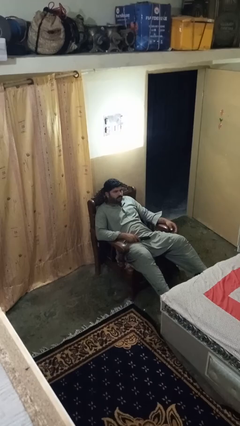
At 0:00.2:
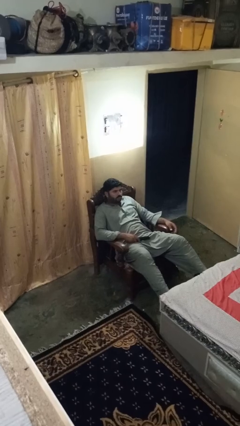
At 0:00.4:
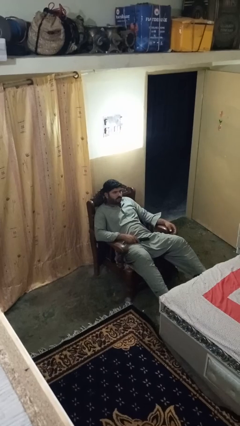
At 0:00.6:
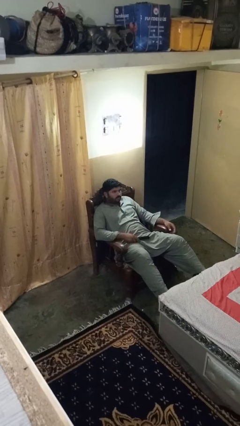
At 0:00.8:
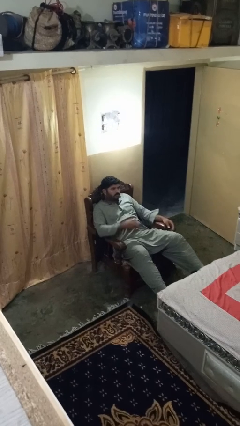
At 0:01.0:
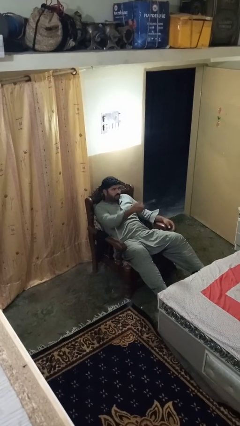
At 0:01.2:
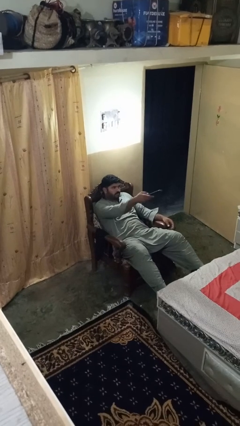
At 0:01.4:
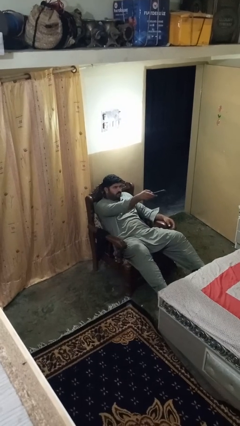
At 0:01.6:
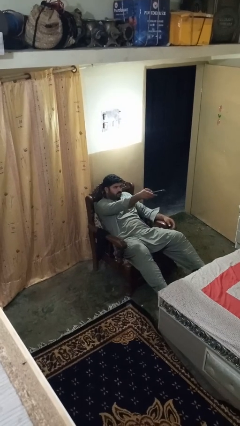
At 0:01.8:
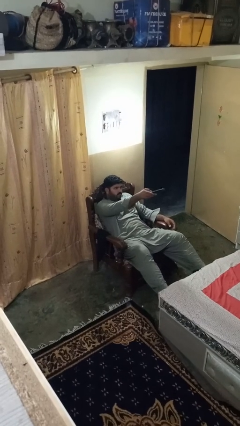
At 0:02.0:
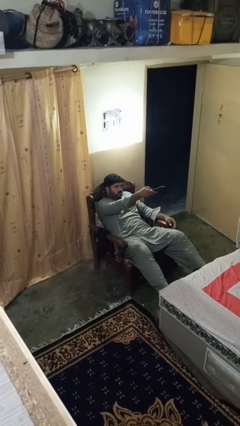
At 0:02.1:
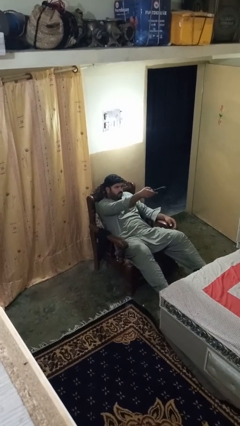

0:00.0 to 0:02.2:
person uses television remote

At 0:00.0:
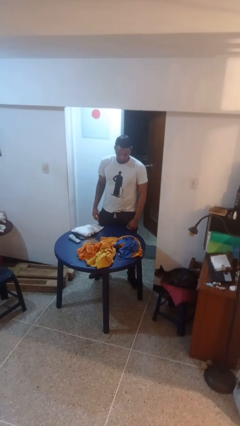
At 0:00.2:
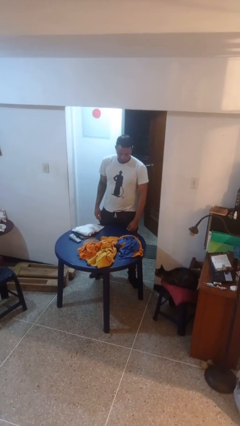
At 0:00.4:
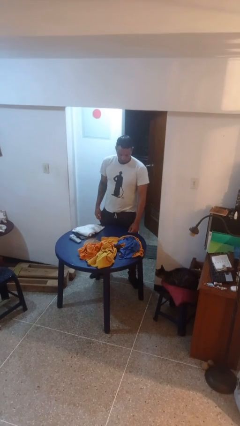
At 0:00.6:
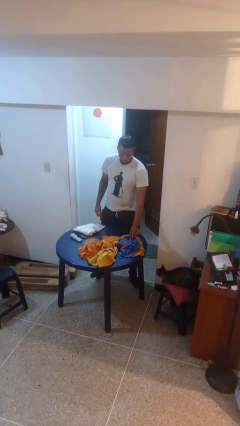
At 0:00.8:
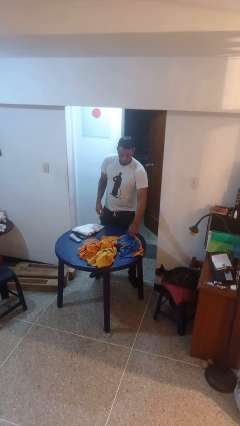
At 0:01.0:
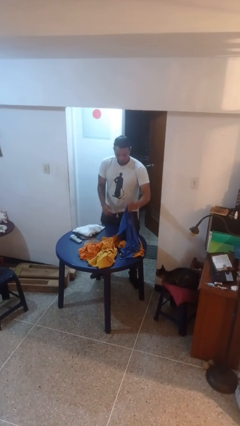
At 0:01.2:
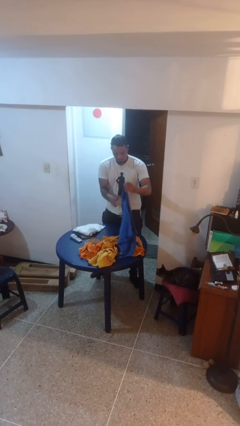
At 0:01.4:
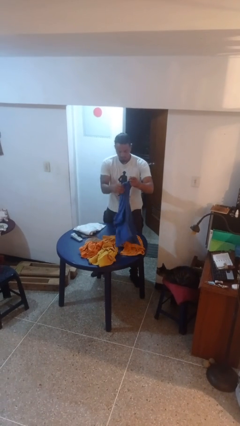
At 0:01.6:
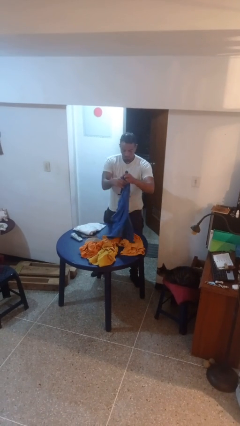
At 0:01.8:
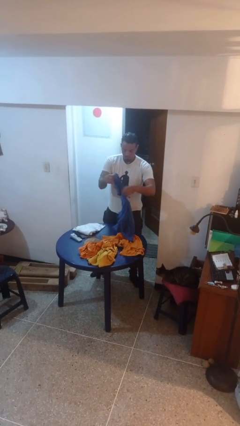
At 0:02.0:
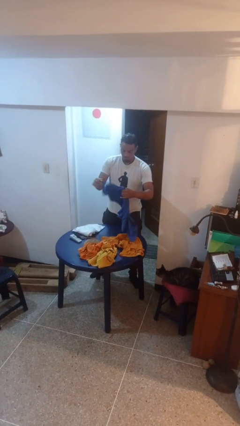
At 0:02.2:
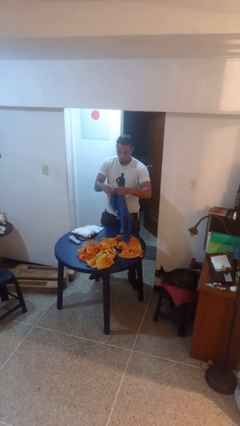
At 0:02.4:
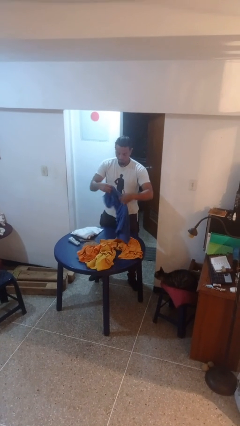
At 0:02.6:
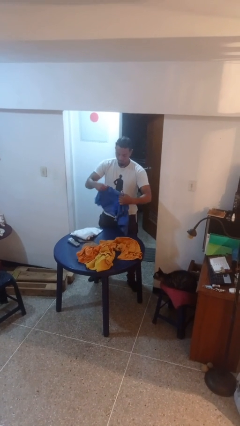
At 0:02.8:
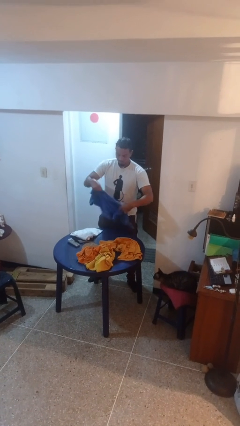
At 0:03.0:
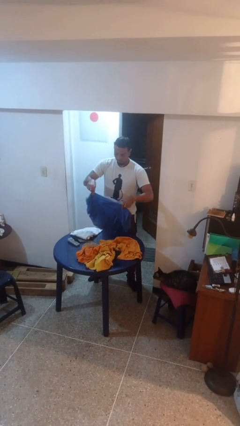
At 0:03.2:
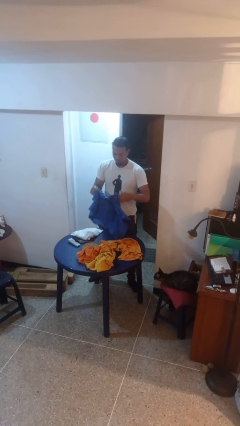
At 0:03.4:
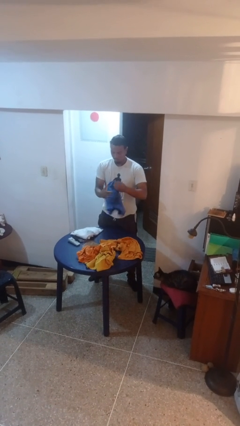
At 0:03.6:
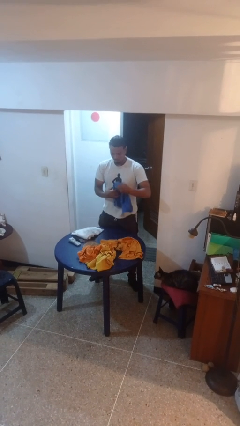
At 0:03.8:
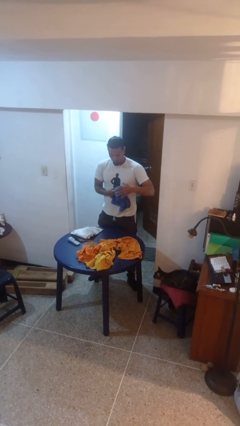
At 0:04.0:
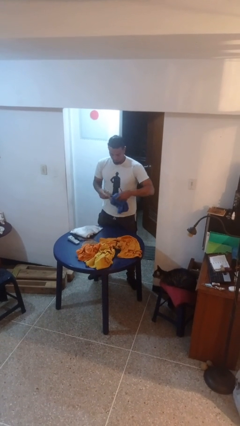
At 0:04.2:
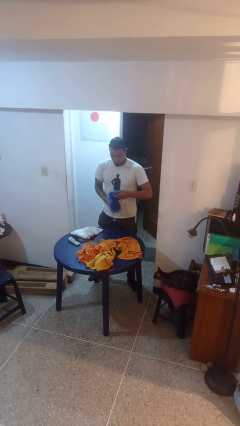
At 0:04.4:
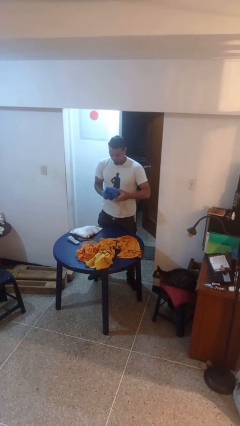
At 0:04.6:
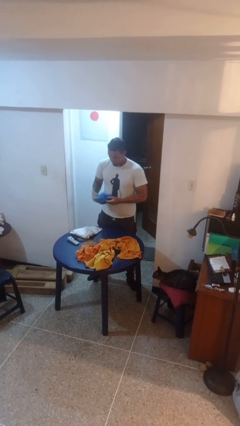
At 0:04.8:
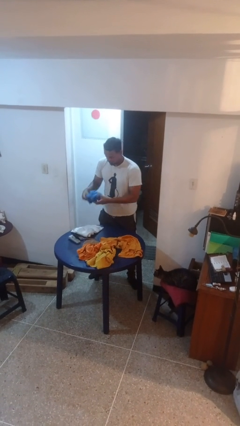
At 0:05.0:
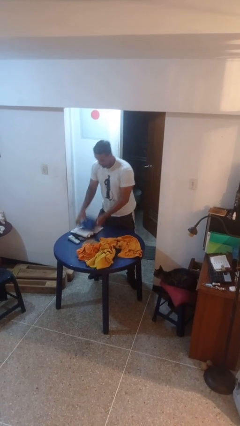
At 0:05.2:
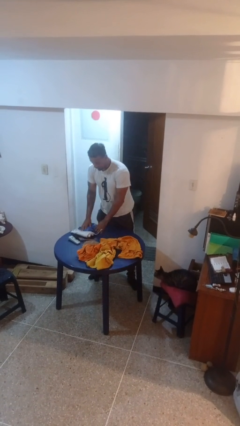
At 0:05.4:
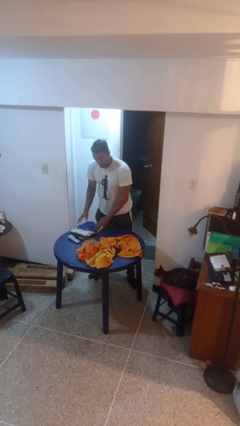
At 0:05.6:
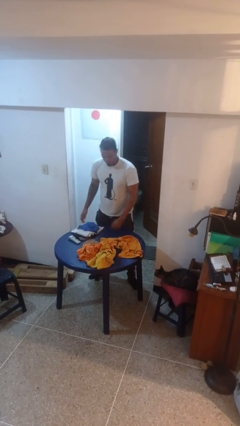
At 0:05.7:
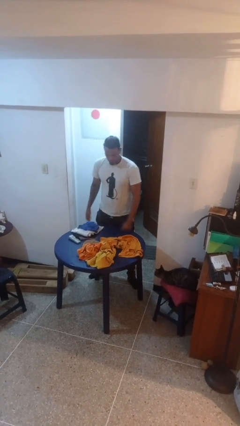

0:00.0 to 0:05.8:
person folds shirt

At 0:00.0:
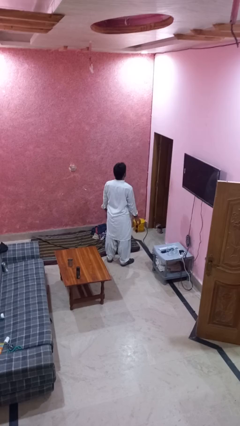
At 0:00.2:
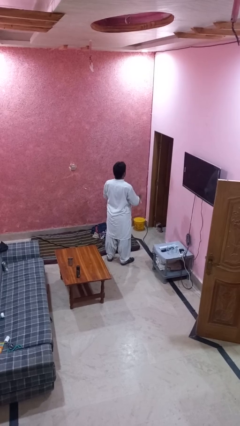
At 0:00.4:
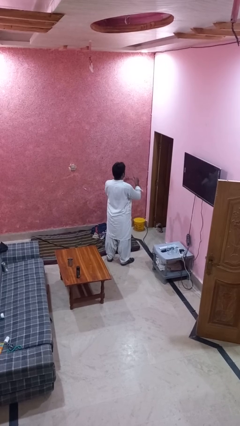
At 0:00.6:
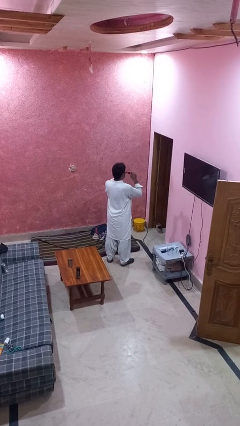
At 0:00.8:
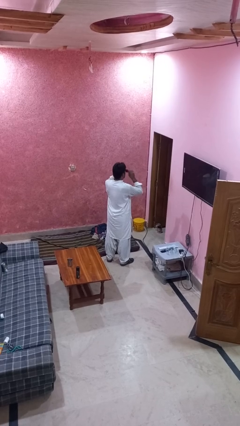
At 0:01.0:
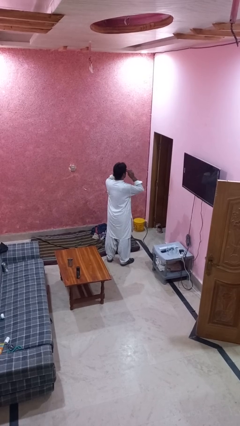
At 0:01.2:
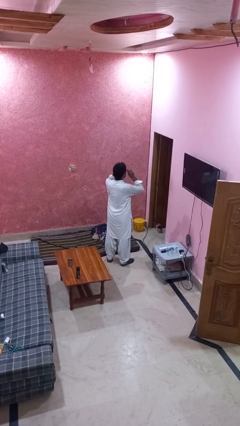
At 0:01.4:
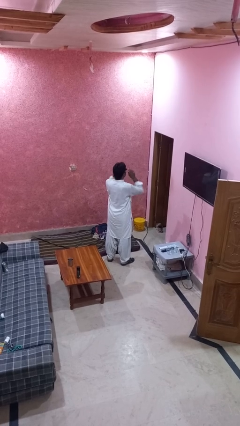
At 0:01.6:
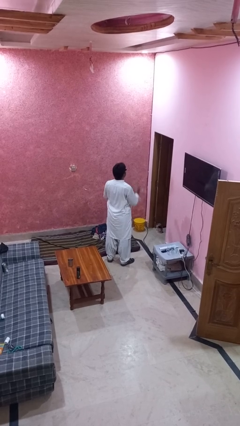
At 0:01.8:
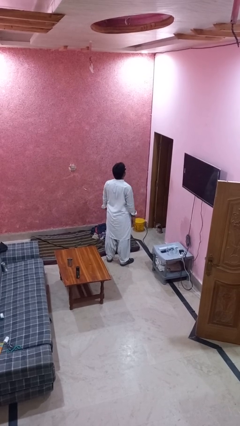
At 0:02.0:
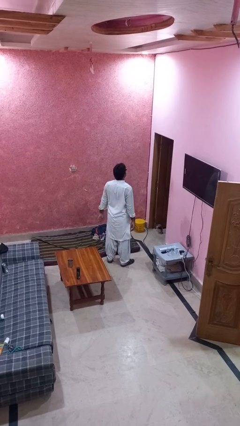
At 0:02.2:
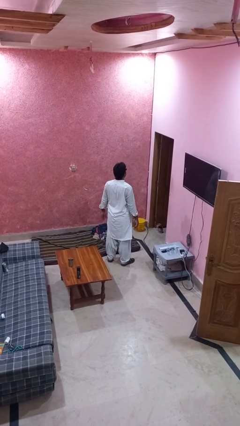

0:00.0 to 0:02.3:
person puts on sunglasses

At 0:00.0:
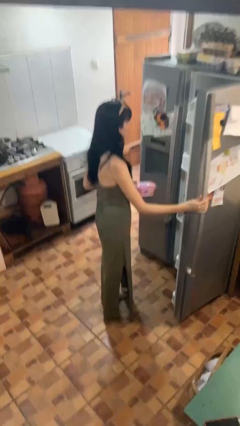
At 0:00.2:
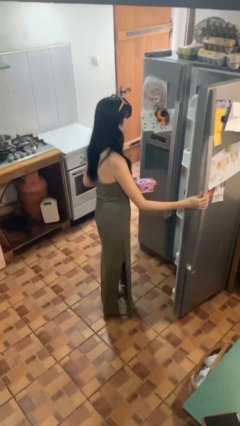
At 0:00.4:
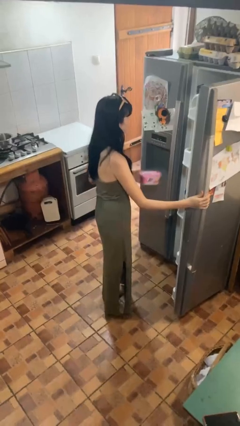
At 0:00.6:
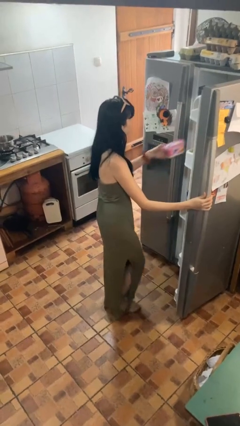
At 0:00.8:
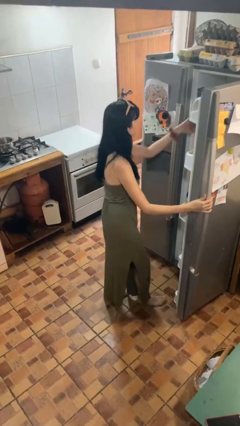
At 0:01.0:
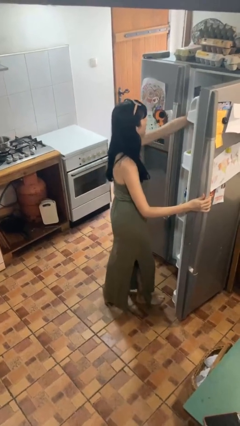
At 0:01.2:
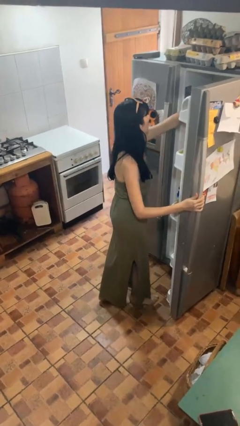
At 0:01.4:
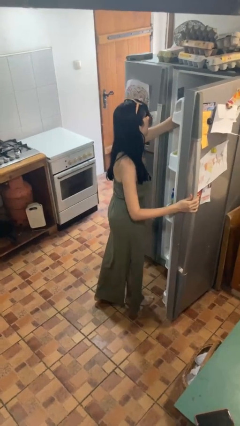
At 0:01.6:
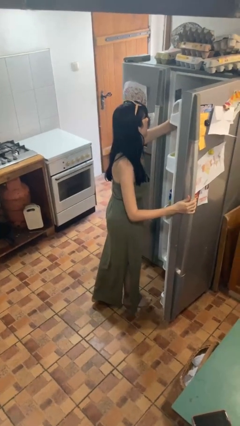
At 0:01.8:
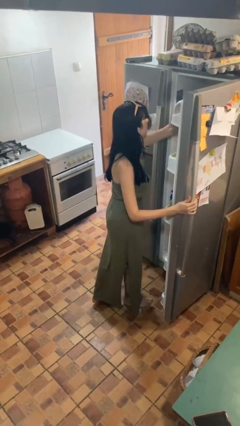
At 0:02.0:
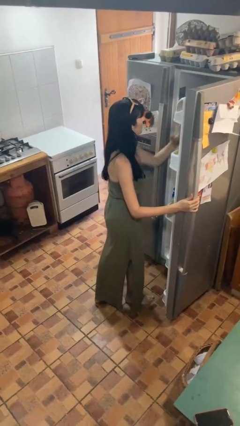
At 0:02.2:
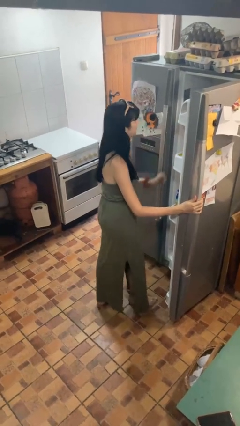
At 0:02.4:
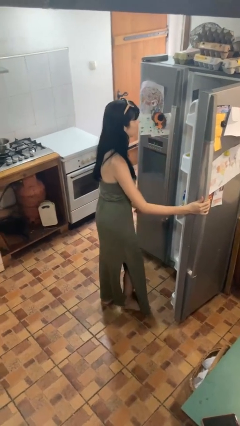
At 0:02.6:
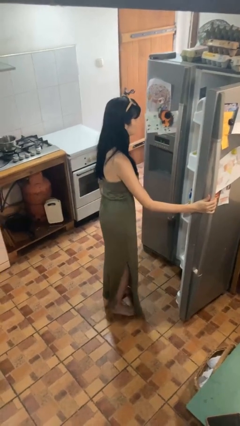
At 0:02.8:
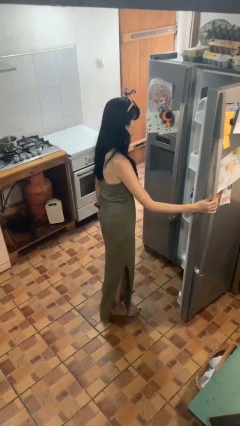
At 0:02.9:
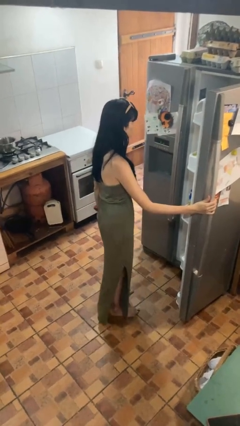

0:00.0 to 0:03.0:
person puts object into refrigerator

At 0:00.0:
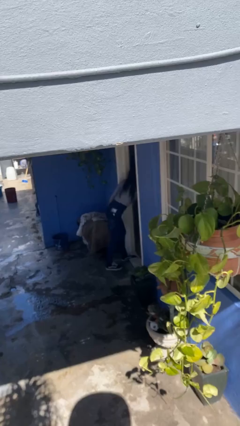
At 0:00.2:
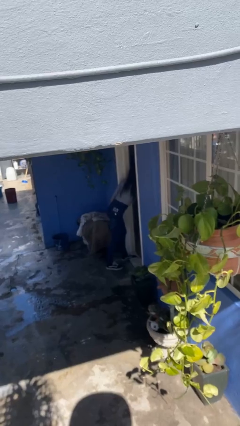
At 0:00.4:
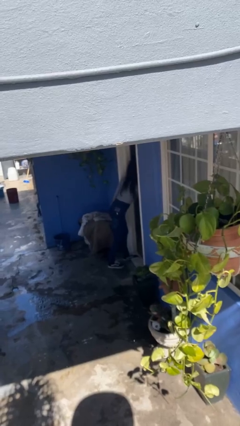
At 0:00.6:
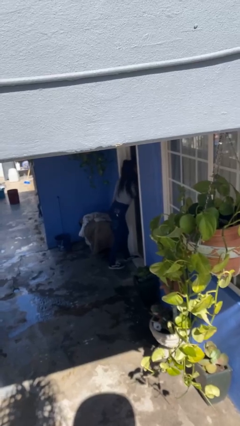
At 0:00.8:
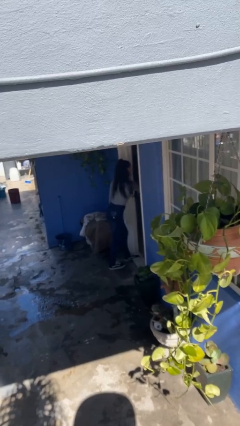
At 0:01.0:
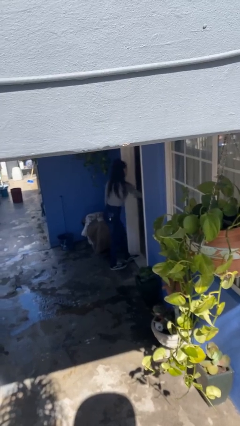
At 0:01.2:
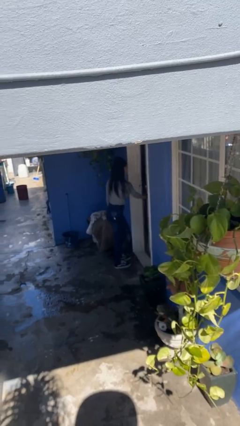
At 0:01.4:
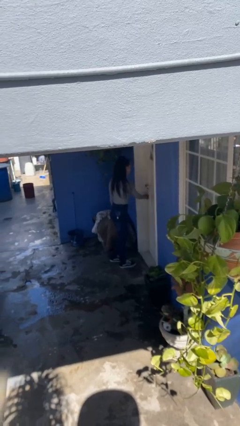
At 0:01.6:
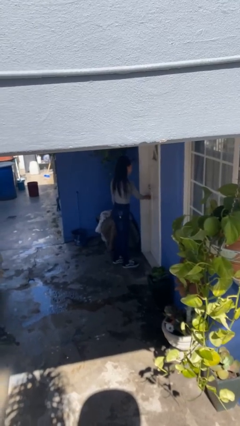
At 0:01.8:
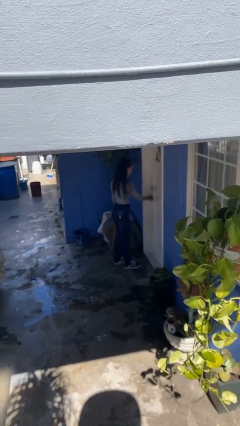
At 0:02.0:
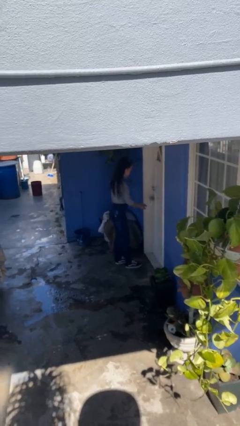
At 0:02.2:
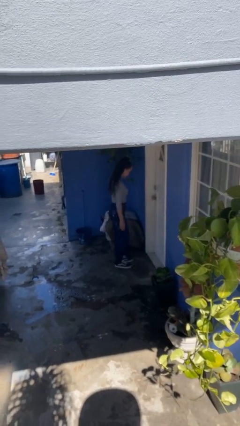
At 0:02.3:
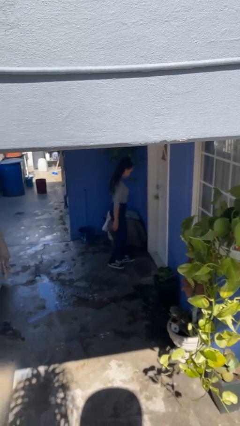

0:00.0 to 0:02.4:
person closes facility door

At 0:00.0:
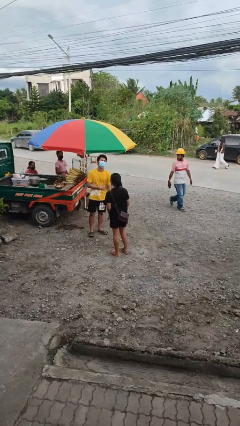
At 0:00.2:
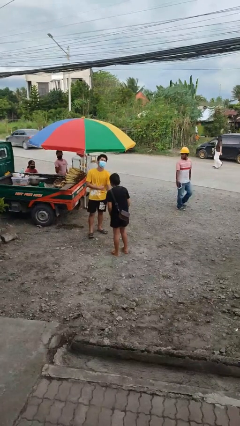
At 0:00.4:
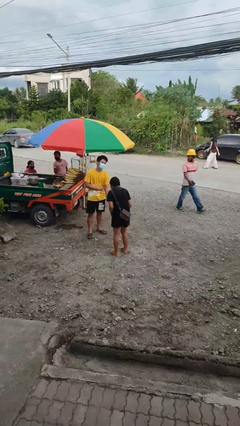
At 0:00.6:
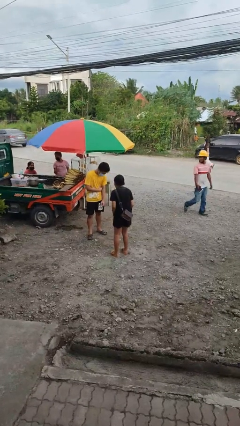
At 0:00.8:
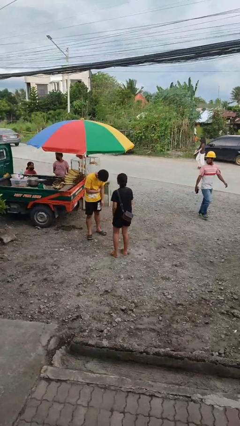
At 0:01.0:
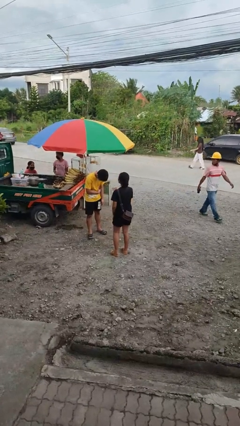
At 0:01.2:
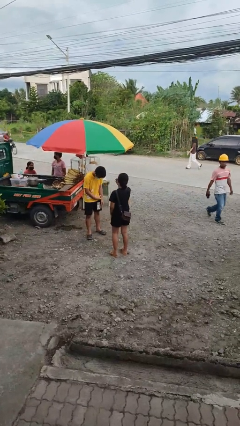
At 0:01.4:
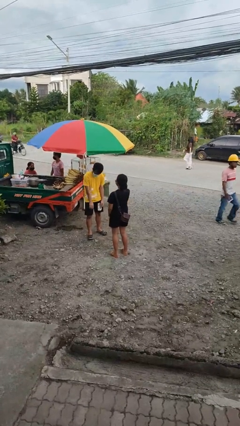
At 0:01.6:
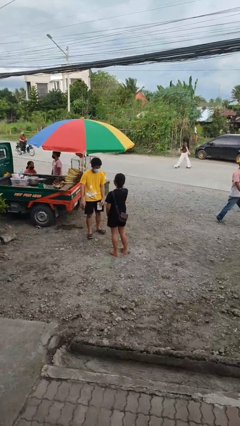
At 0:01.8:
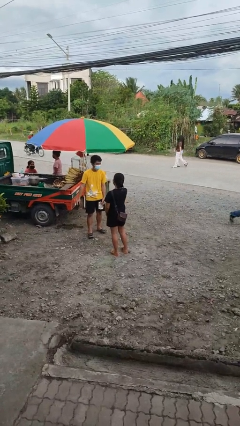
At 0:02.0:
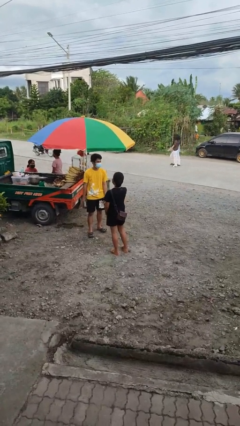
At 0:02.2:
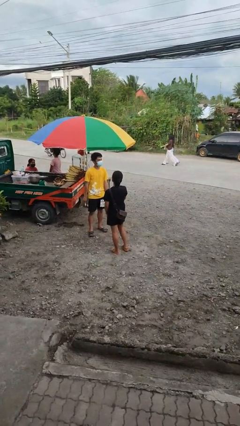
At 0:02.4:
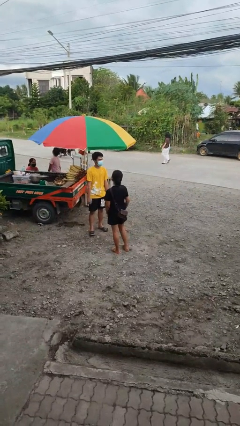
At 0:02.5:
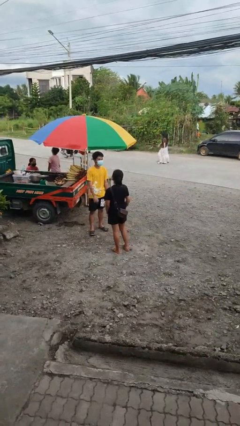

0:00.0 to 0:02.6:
person laughs with person
